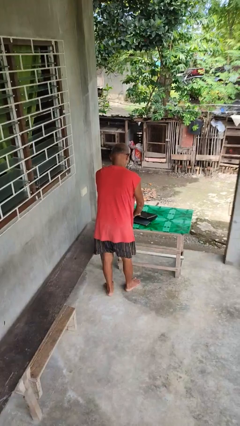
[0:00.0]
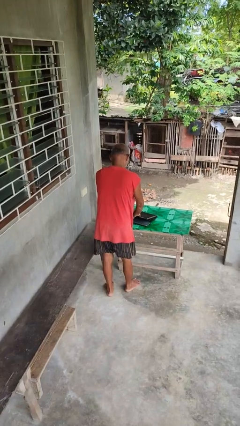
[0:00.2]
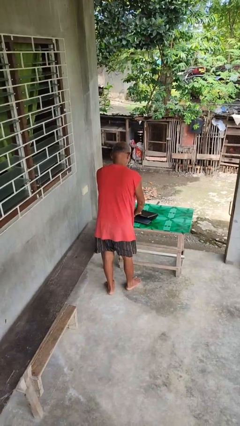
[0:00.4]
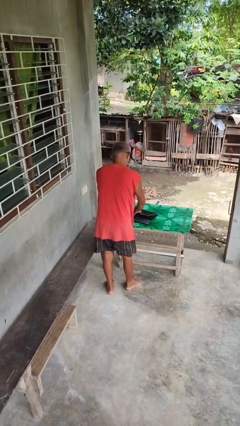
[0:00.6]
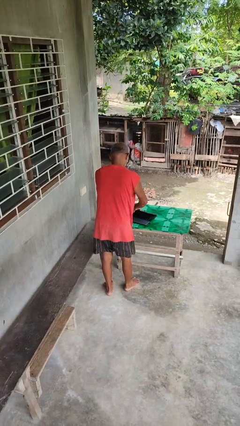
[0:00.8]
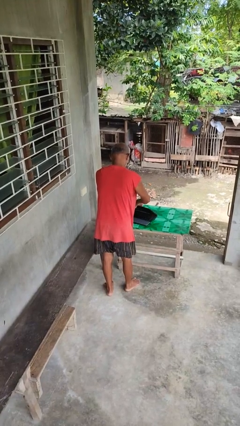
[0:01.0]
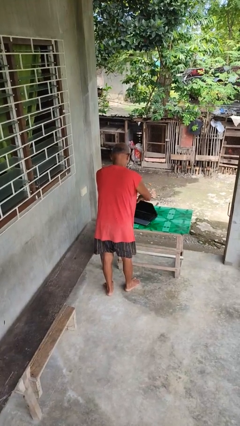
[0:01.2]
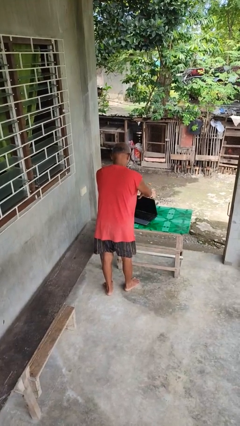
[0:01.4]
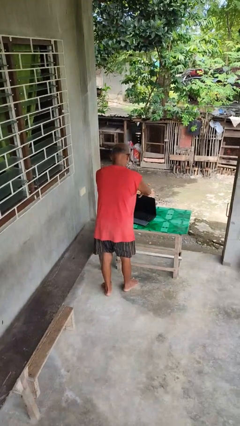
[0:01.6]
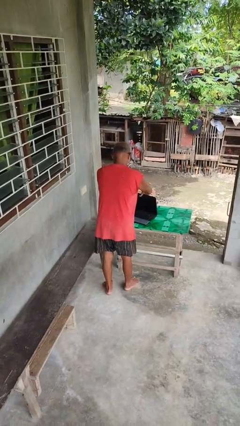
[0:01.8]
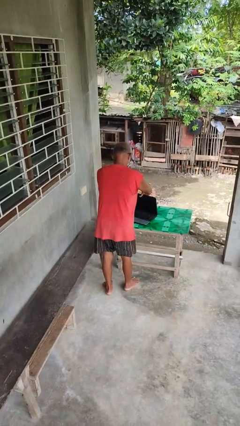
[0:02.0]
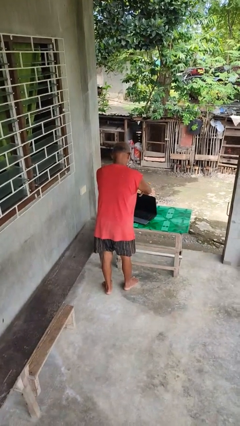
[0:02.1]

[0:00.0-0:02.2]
person opens laptop

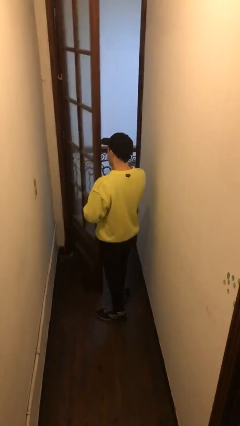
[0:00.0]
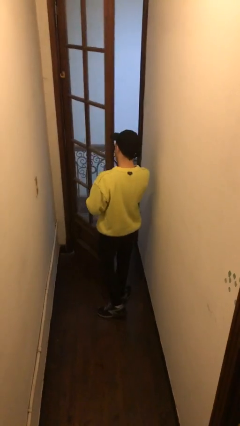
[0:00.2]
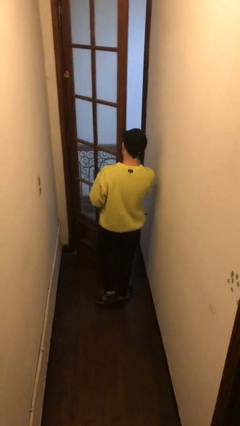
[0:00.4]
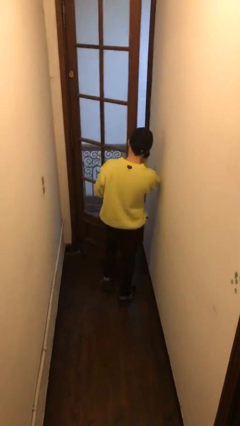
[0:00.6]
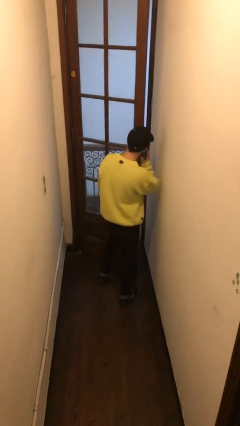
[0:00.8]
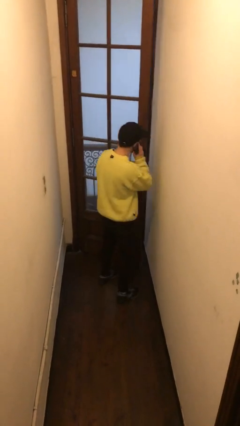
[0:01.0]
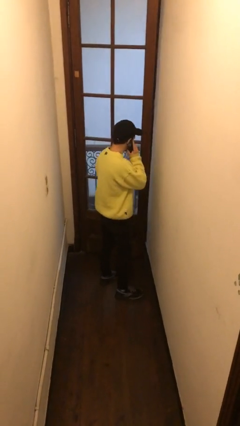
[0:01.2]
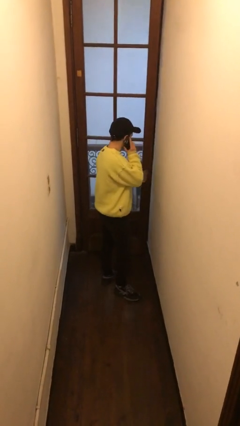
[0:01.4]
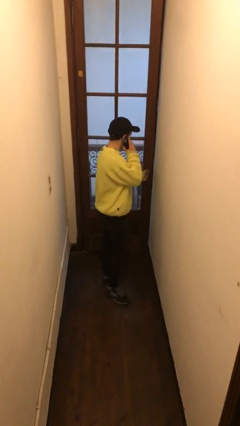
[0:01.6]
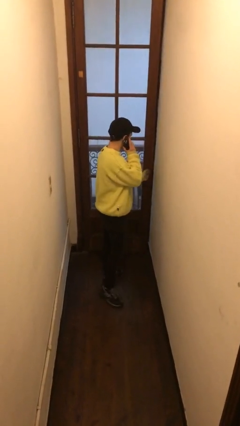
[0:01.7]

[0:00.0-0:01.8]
person closes facility door

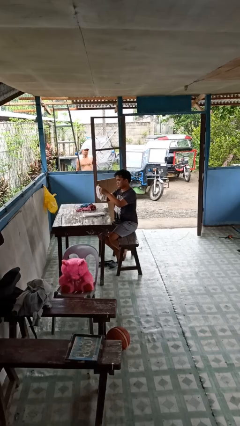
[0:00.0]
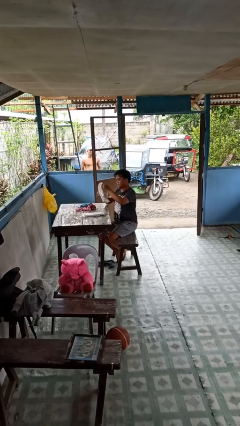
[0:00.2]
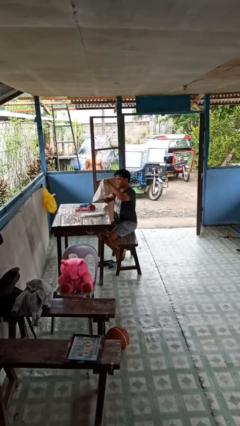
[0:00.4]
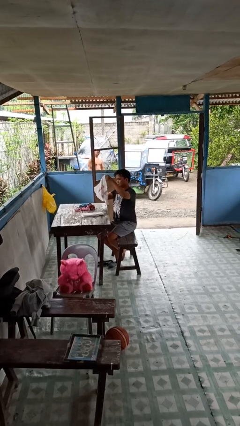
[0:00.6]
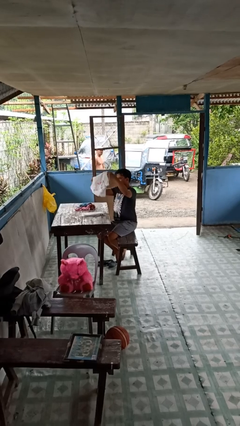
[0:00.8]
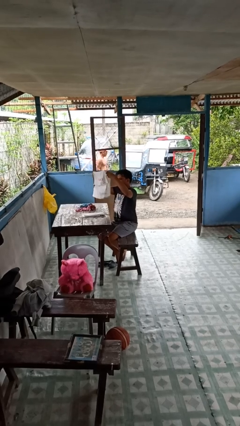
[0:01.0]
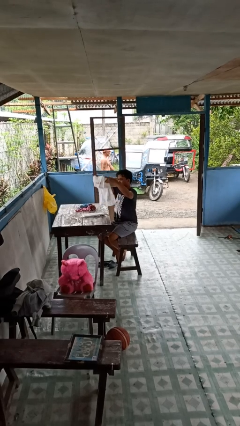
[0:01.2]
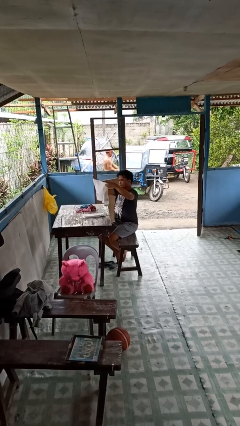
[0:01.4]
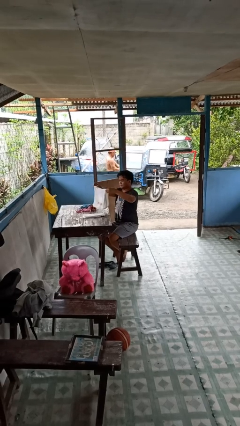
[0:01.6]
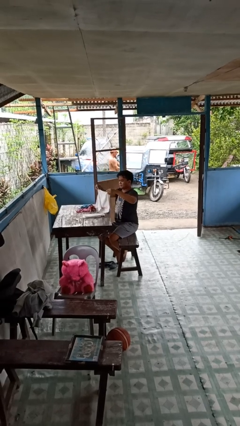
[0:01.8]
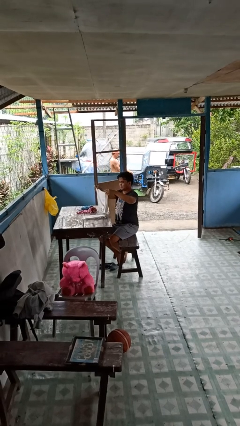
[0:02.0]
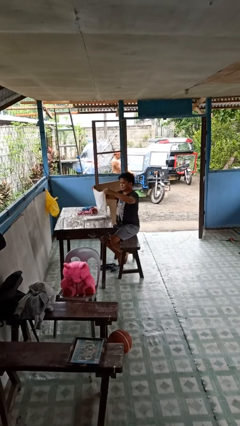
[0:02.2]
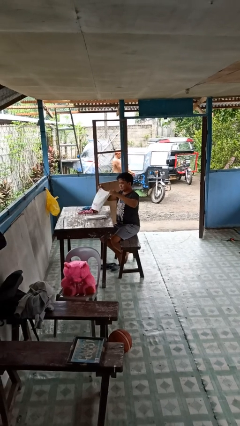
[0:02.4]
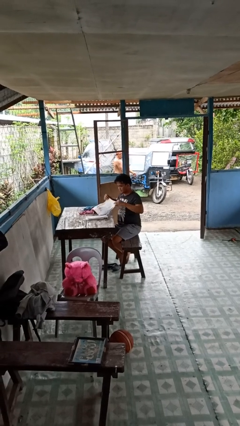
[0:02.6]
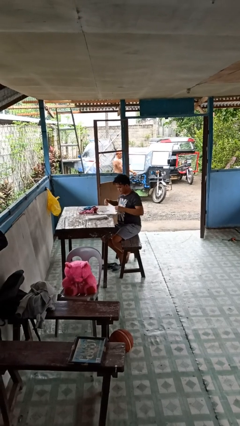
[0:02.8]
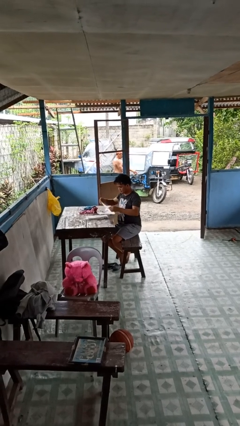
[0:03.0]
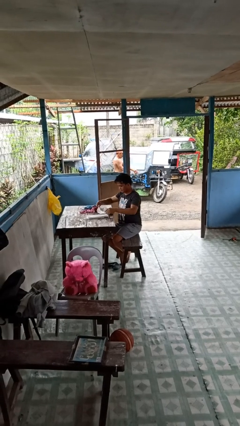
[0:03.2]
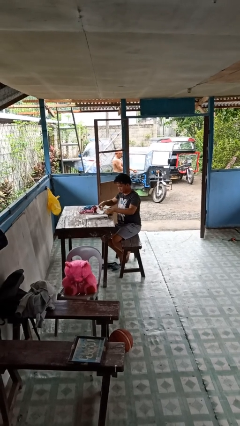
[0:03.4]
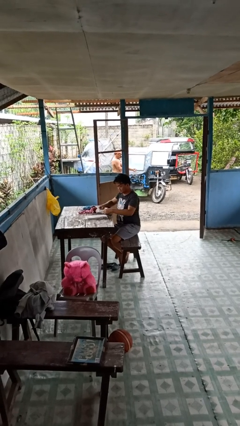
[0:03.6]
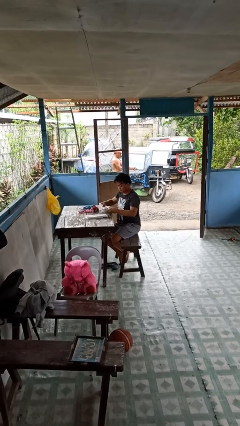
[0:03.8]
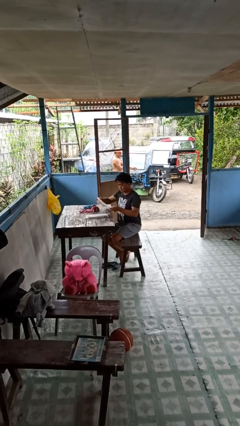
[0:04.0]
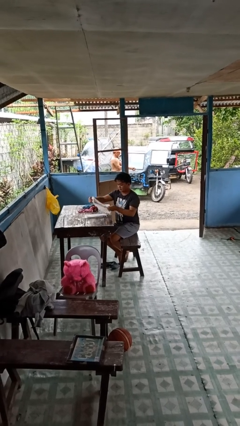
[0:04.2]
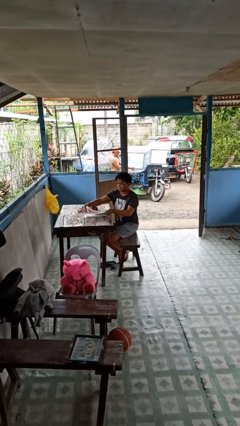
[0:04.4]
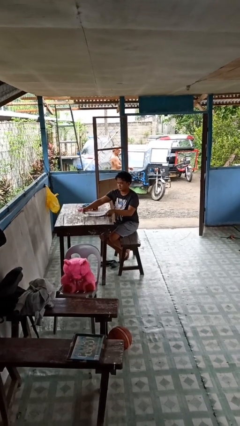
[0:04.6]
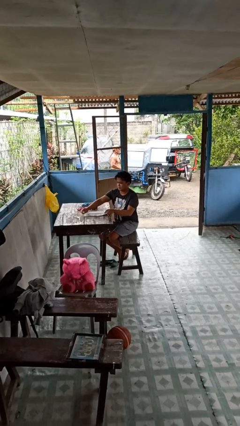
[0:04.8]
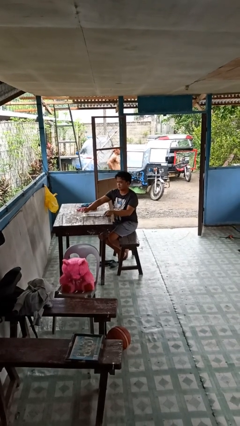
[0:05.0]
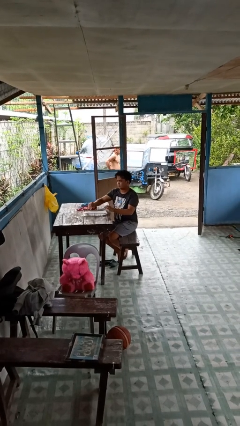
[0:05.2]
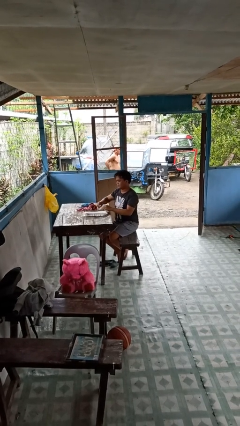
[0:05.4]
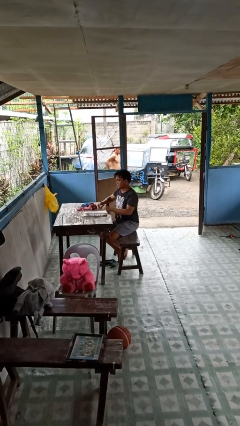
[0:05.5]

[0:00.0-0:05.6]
person folds towel

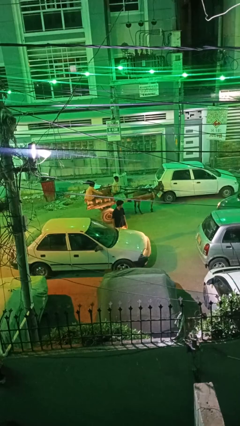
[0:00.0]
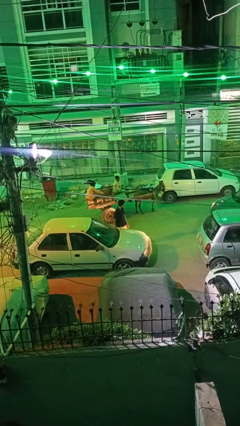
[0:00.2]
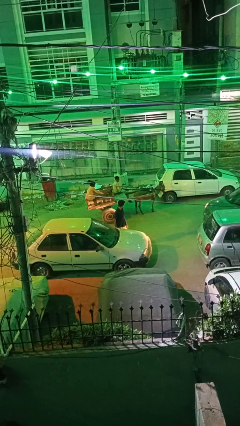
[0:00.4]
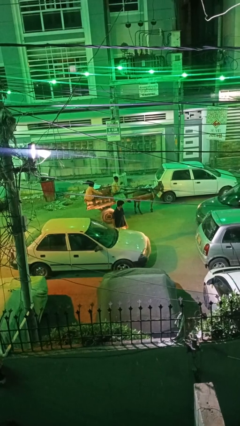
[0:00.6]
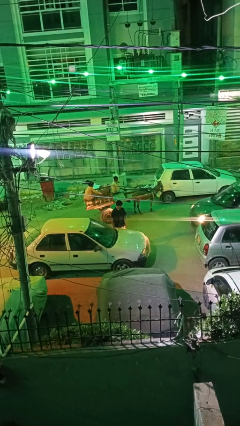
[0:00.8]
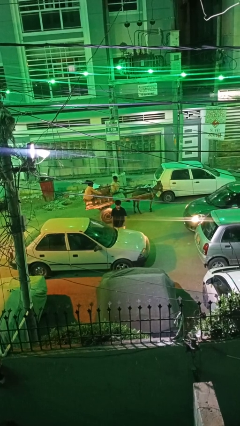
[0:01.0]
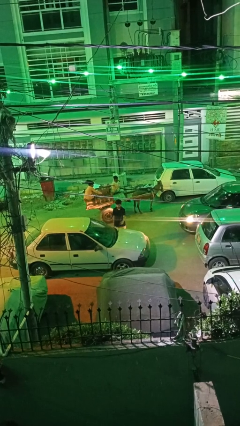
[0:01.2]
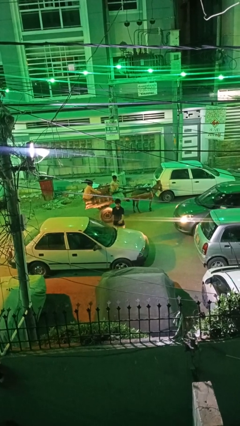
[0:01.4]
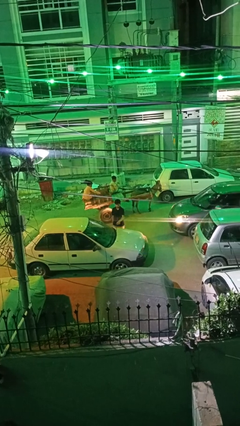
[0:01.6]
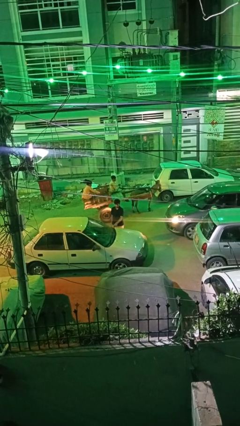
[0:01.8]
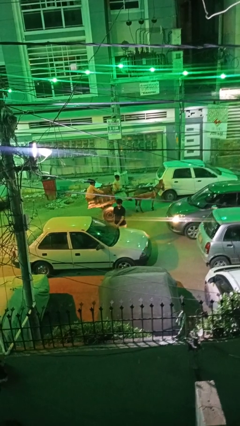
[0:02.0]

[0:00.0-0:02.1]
person flips down car wipers

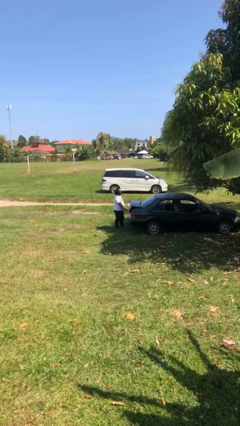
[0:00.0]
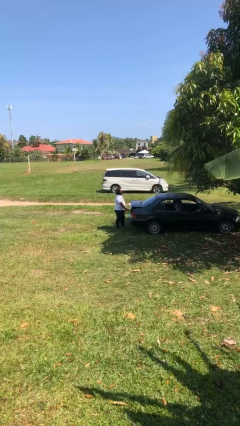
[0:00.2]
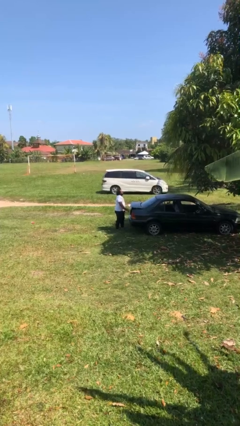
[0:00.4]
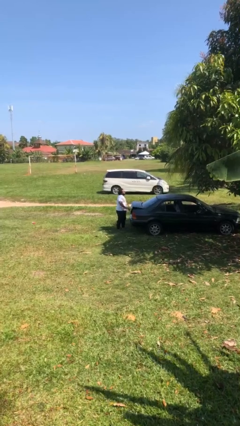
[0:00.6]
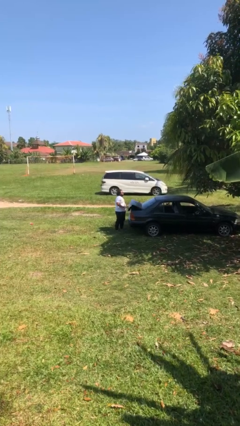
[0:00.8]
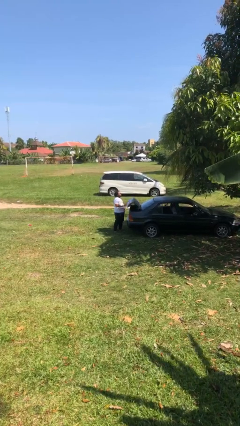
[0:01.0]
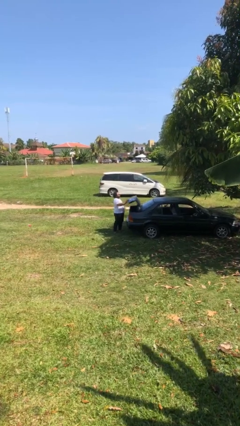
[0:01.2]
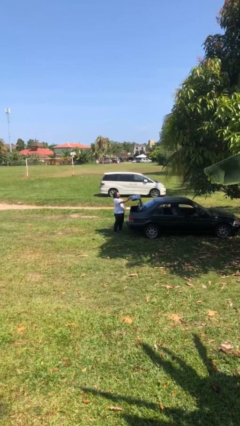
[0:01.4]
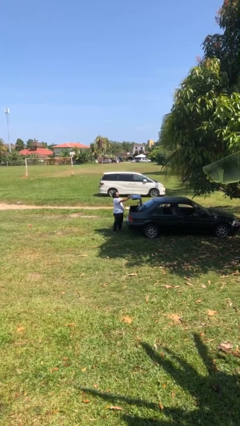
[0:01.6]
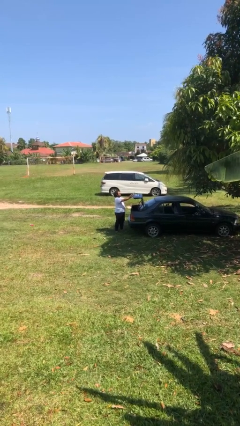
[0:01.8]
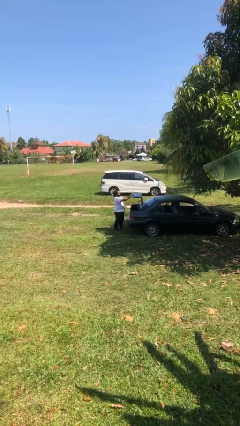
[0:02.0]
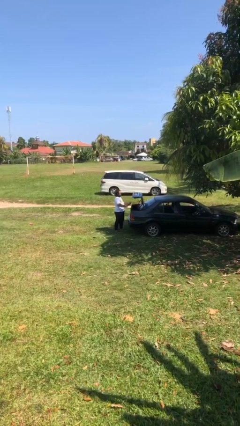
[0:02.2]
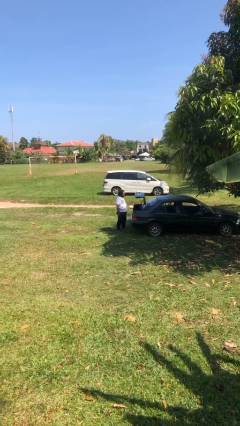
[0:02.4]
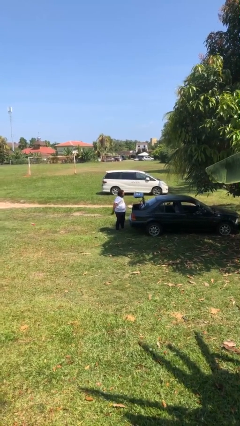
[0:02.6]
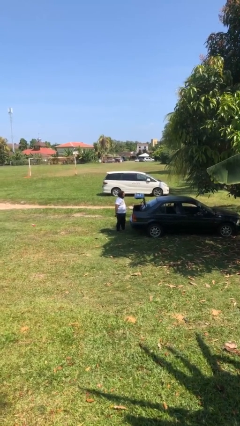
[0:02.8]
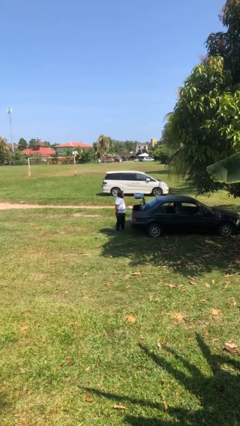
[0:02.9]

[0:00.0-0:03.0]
person opens car trunk

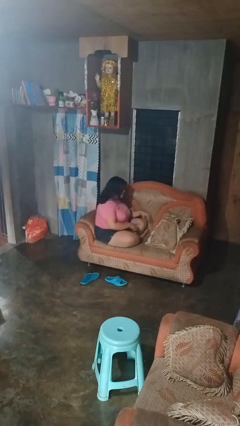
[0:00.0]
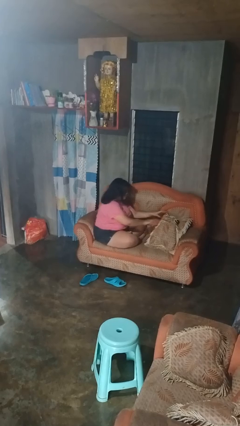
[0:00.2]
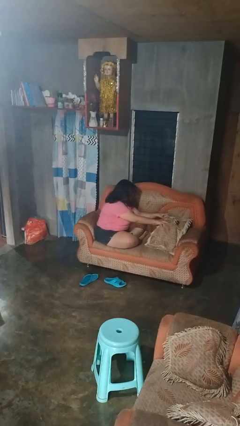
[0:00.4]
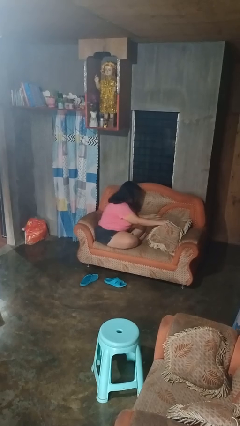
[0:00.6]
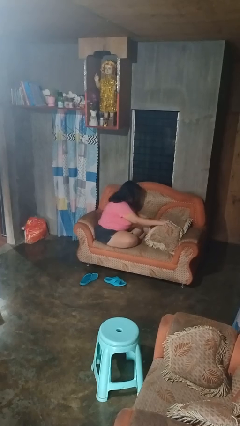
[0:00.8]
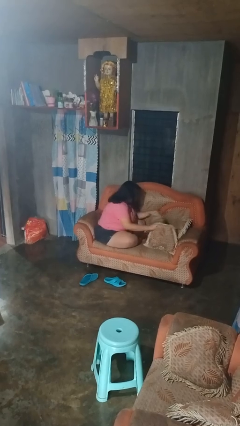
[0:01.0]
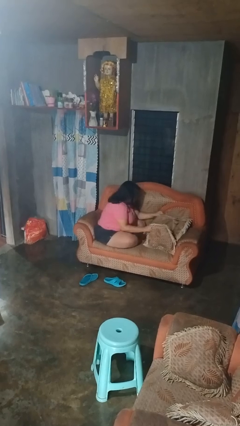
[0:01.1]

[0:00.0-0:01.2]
person searches in couch

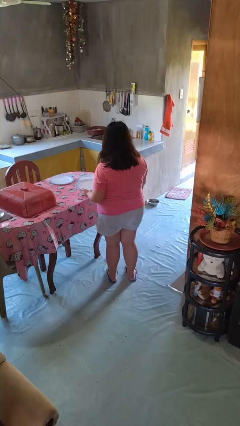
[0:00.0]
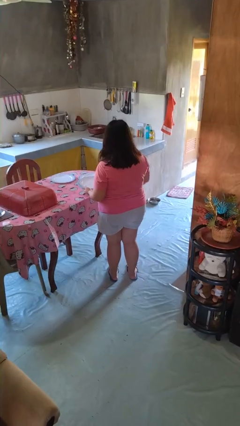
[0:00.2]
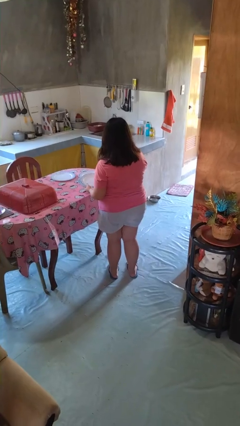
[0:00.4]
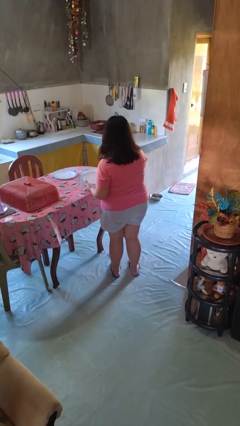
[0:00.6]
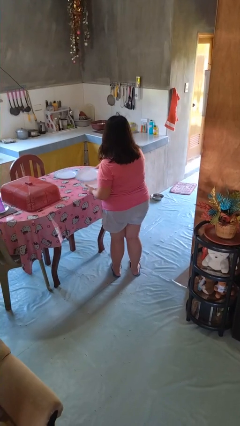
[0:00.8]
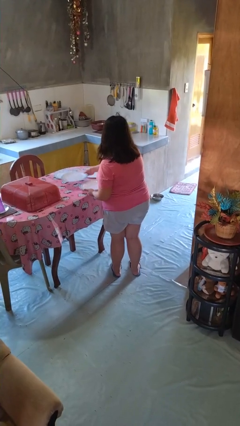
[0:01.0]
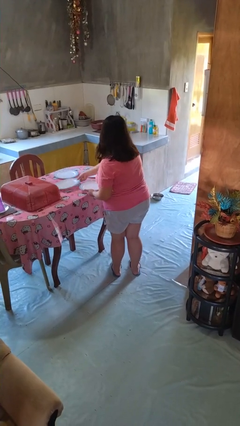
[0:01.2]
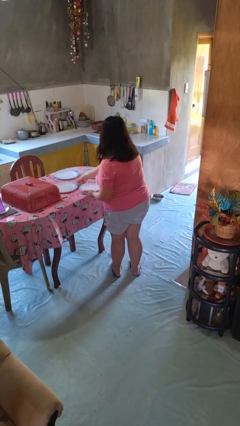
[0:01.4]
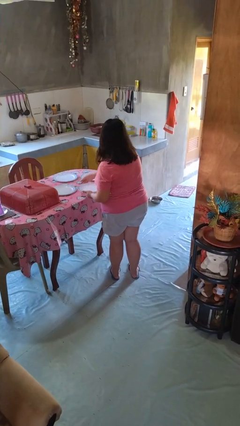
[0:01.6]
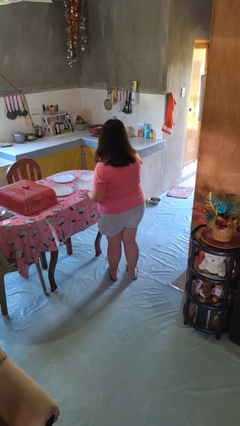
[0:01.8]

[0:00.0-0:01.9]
person sets table
